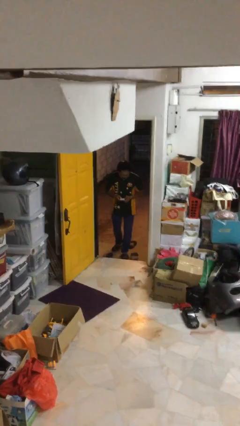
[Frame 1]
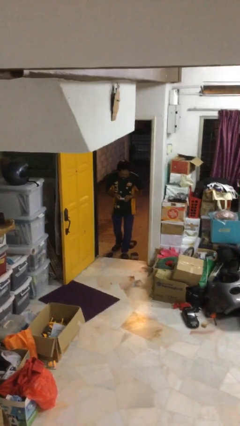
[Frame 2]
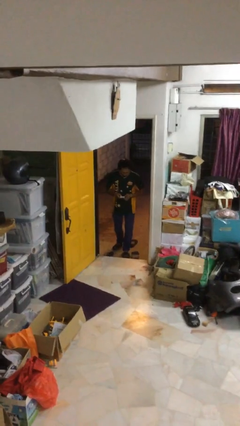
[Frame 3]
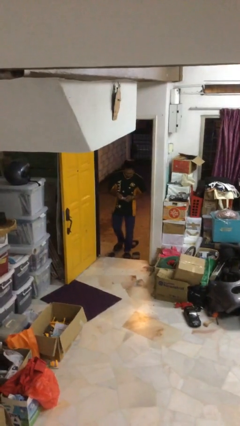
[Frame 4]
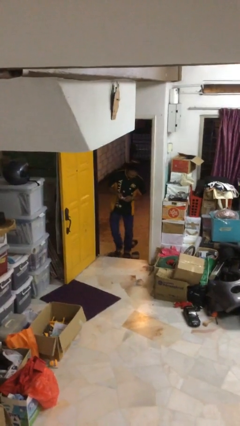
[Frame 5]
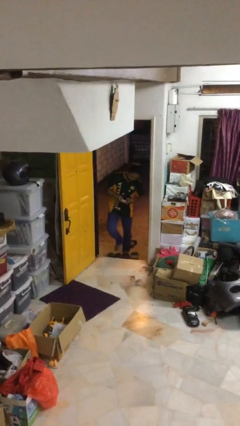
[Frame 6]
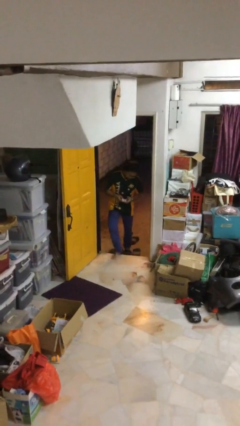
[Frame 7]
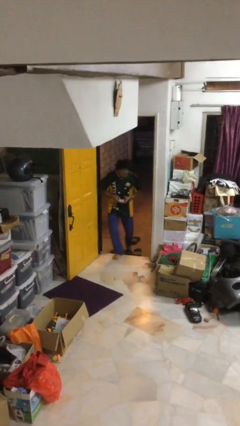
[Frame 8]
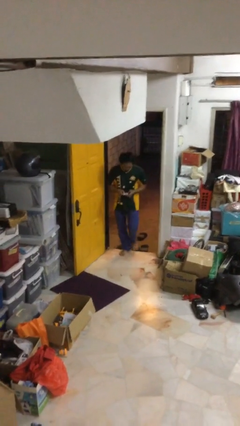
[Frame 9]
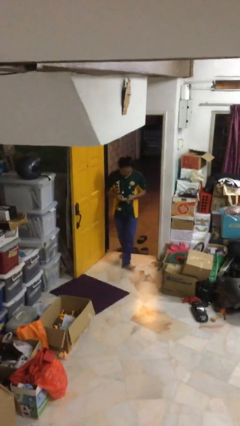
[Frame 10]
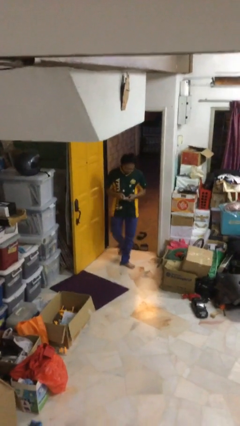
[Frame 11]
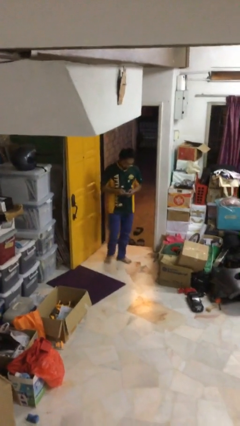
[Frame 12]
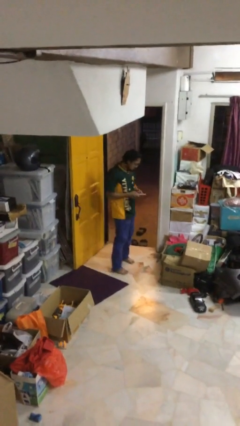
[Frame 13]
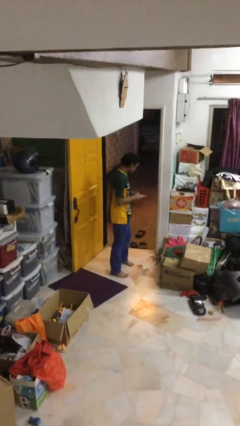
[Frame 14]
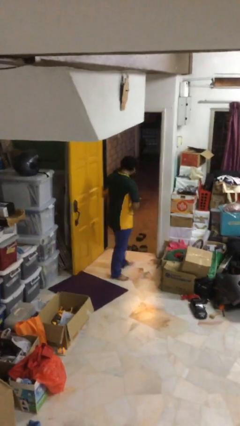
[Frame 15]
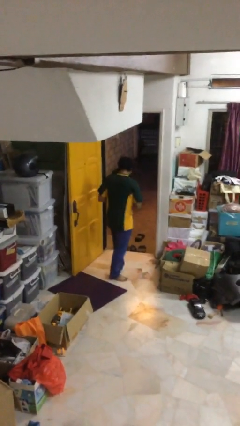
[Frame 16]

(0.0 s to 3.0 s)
person enters scene through structure

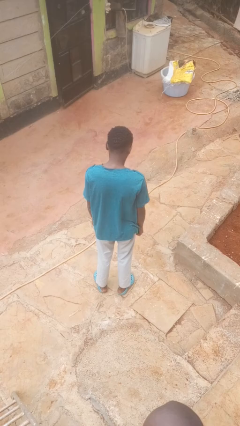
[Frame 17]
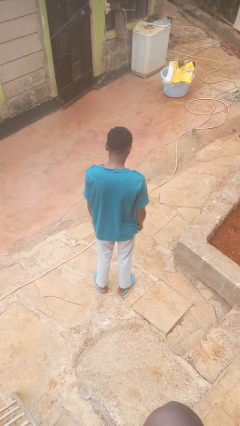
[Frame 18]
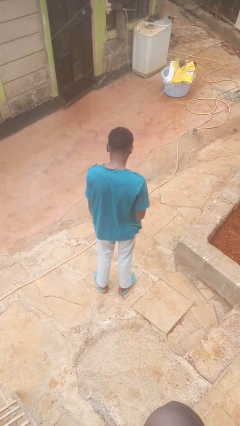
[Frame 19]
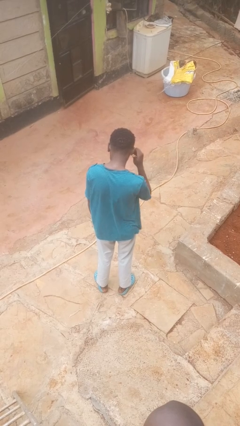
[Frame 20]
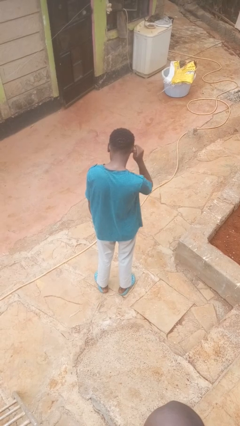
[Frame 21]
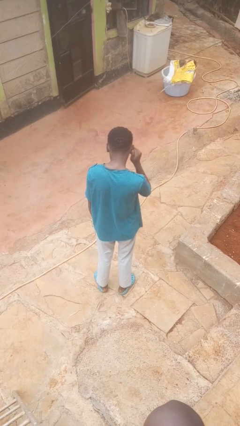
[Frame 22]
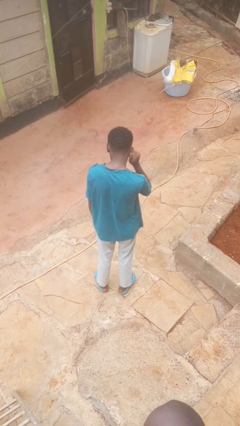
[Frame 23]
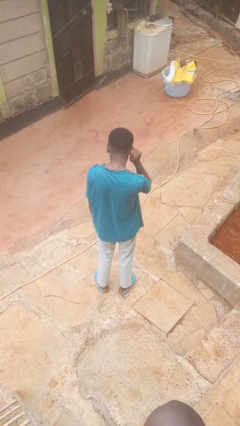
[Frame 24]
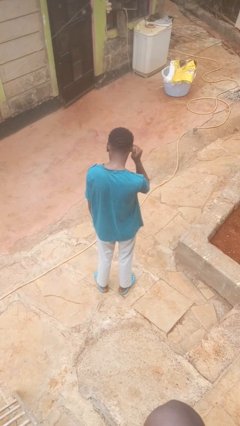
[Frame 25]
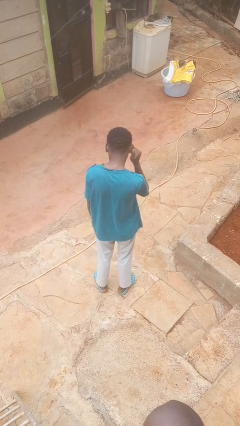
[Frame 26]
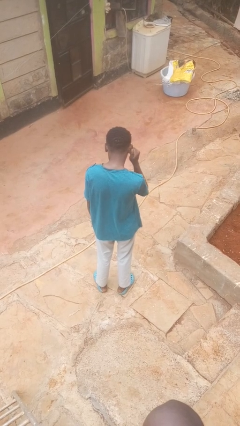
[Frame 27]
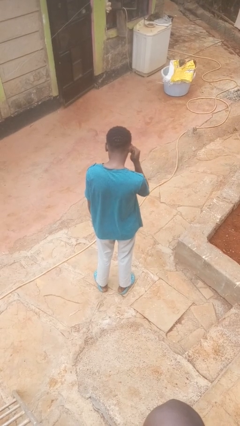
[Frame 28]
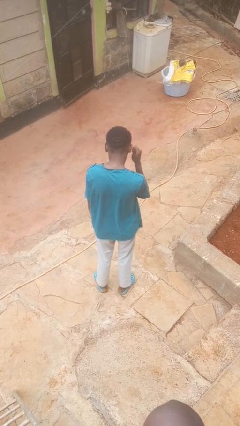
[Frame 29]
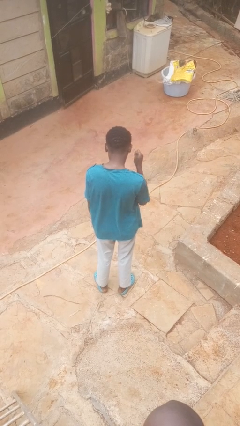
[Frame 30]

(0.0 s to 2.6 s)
person touches earlobe

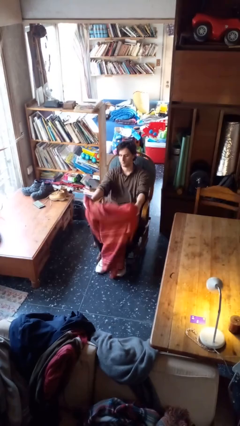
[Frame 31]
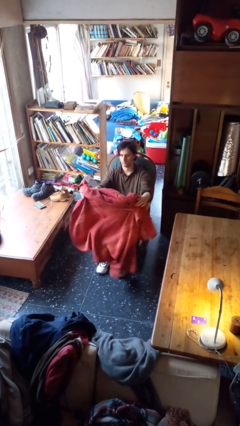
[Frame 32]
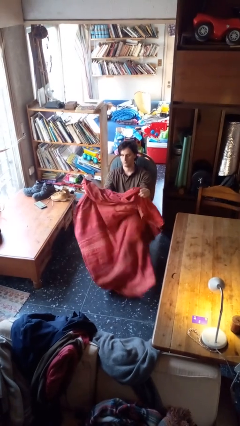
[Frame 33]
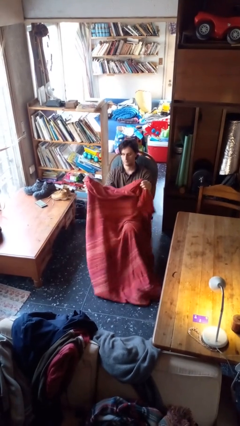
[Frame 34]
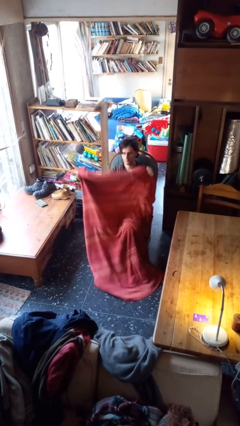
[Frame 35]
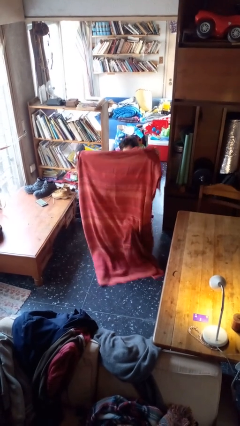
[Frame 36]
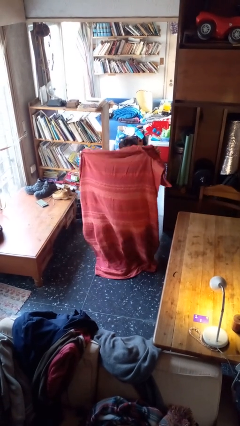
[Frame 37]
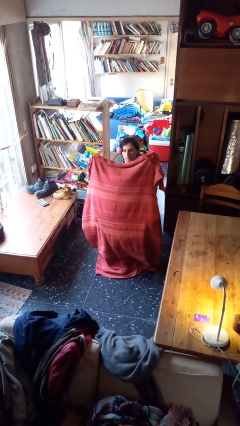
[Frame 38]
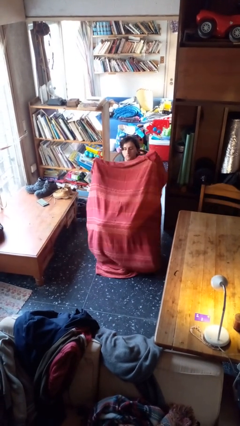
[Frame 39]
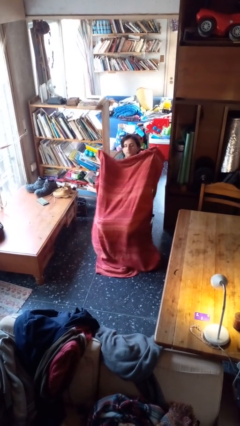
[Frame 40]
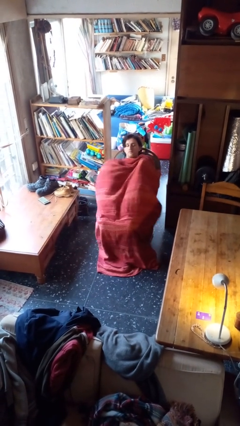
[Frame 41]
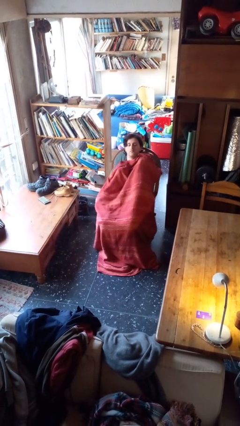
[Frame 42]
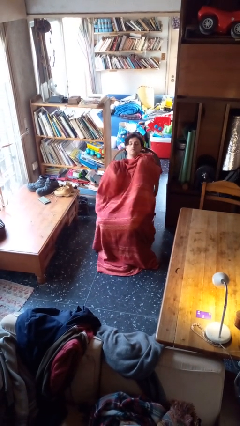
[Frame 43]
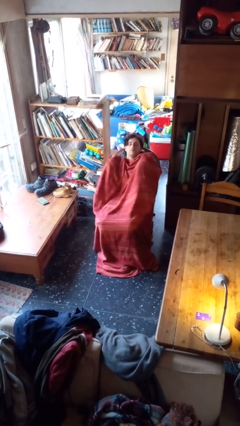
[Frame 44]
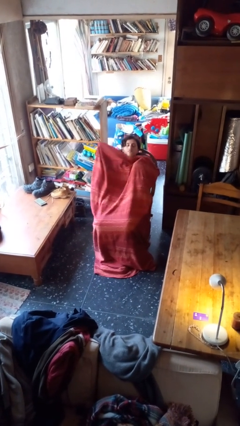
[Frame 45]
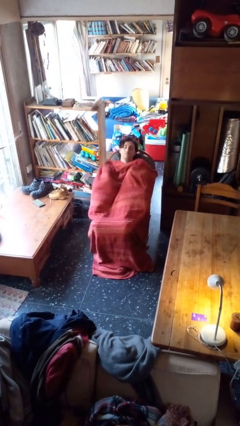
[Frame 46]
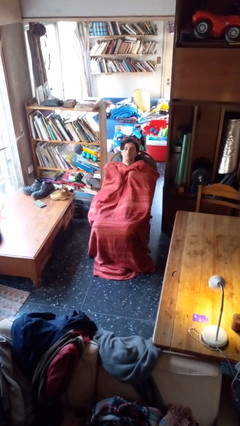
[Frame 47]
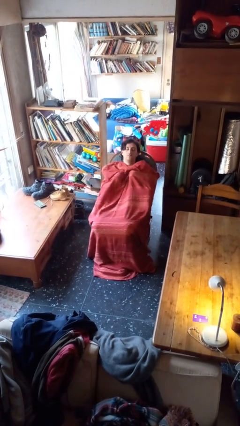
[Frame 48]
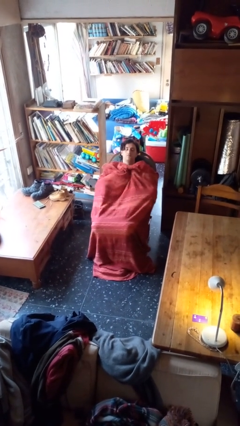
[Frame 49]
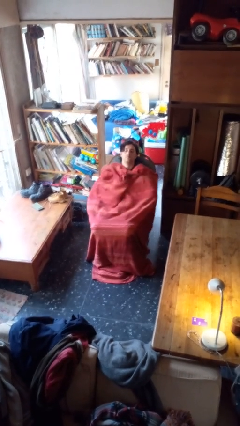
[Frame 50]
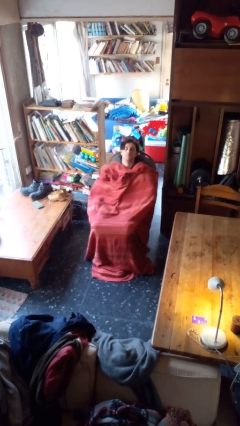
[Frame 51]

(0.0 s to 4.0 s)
person covers with blanket

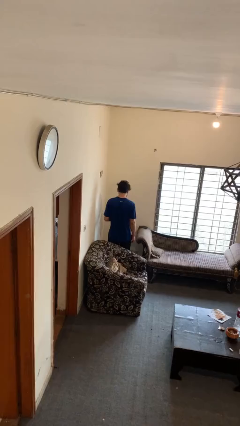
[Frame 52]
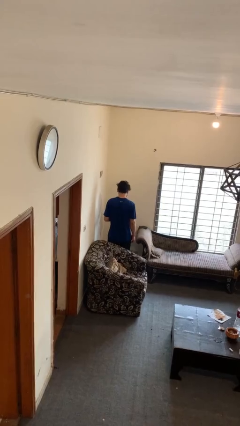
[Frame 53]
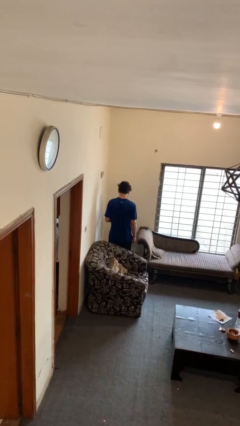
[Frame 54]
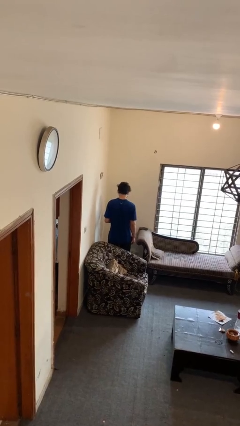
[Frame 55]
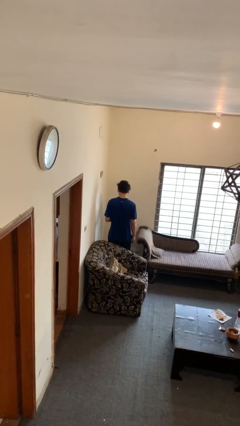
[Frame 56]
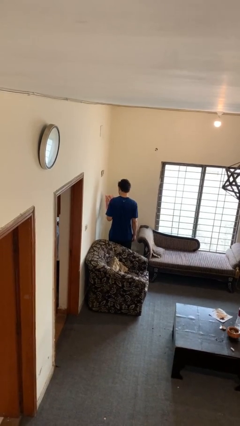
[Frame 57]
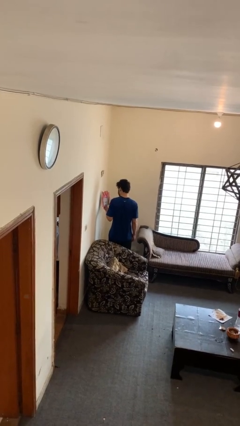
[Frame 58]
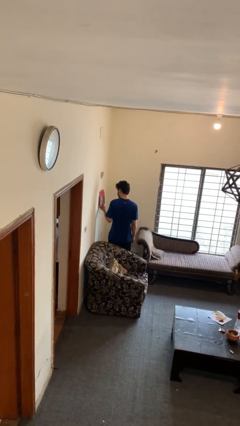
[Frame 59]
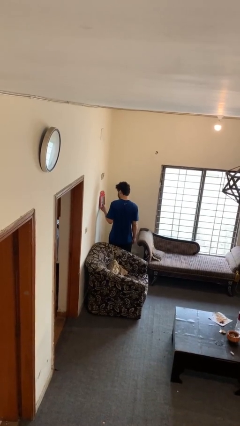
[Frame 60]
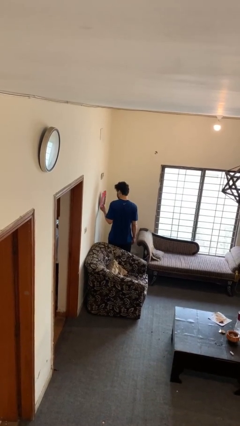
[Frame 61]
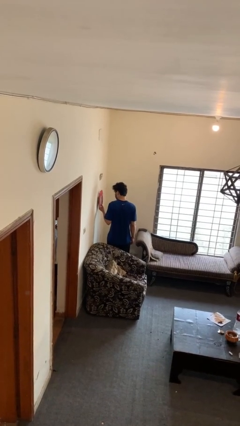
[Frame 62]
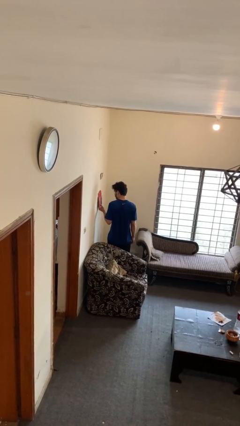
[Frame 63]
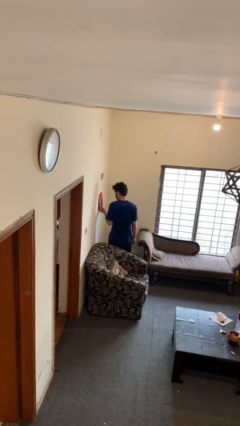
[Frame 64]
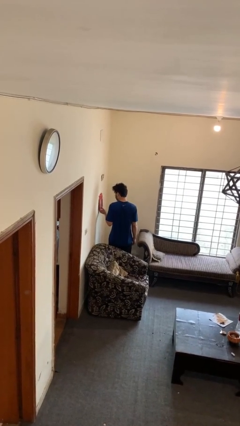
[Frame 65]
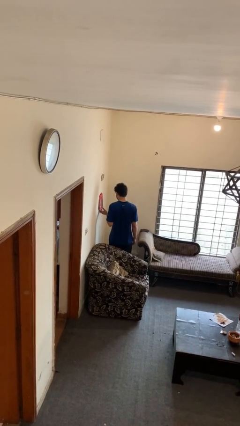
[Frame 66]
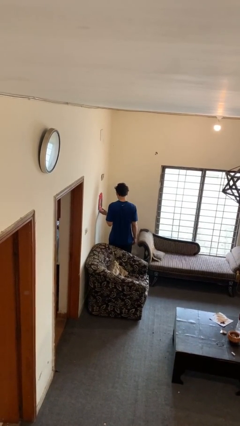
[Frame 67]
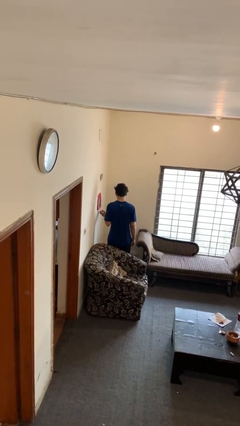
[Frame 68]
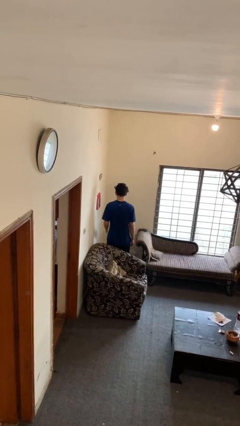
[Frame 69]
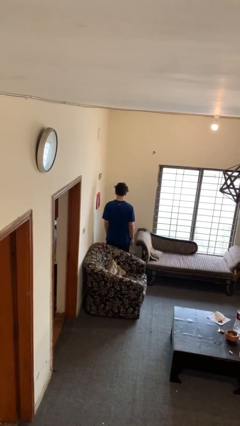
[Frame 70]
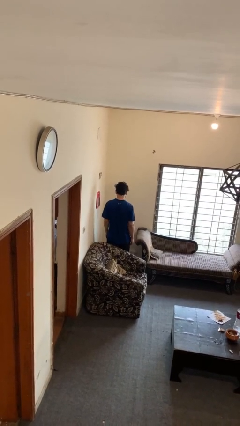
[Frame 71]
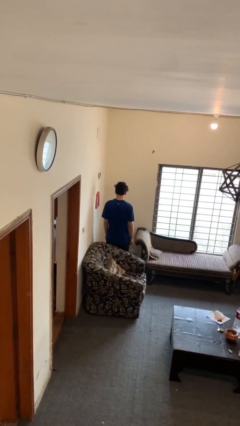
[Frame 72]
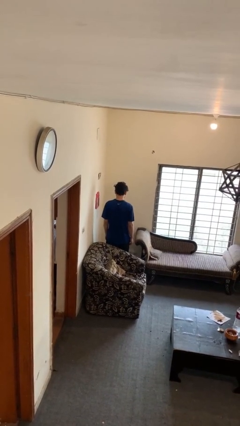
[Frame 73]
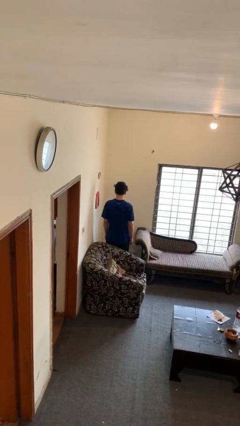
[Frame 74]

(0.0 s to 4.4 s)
person puts up picture frame

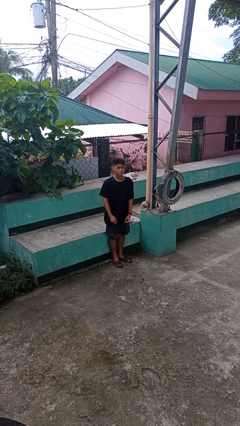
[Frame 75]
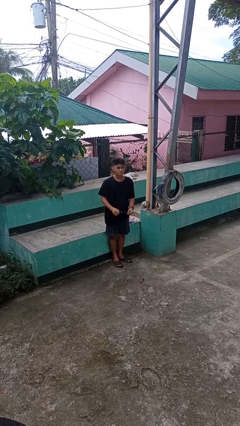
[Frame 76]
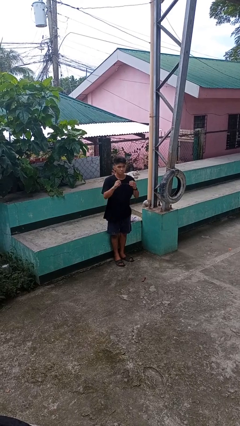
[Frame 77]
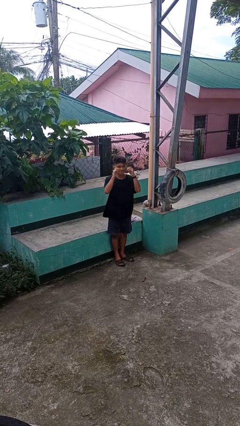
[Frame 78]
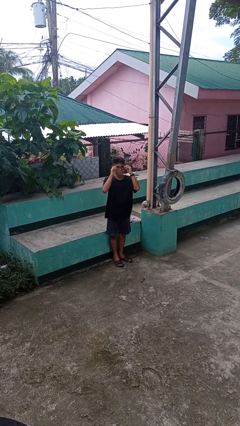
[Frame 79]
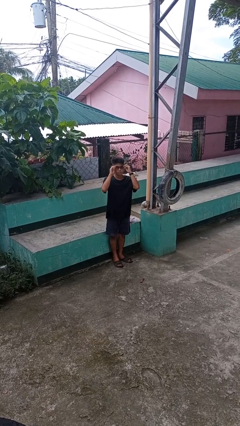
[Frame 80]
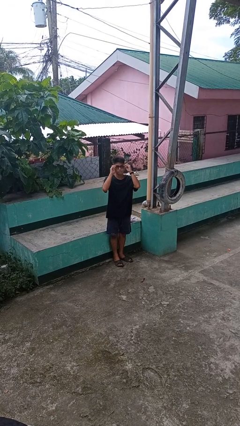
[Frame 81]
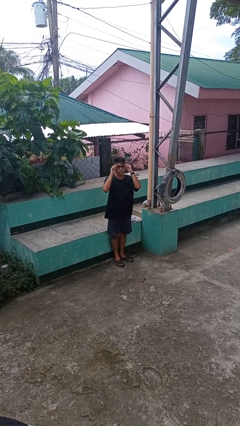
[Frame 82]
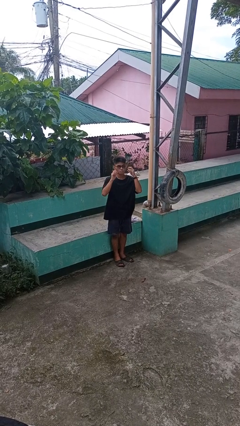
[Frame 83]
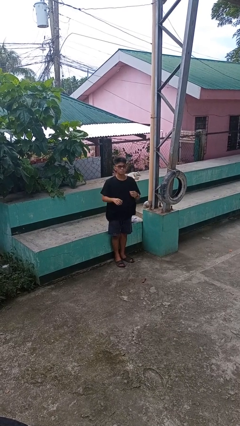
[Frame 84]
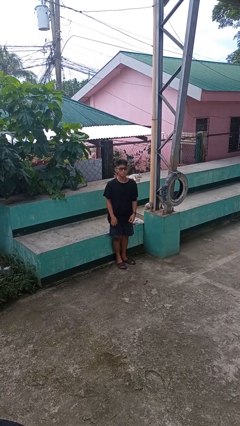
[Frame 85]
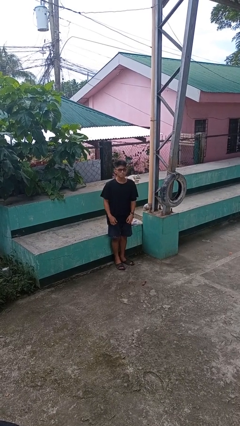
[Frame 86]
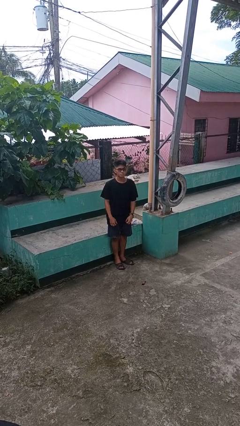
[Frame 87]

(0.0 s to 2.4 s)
person puts on glasses

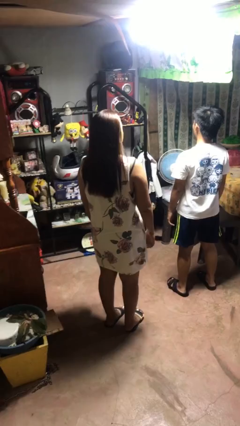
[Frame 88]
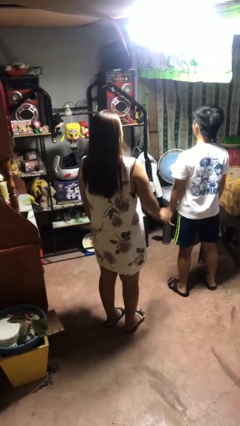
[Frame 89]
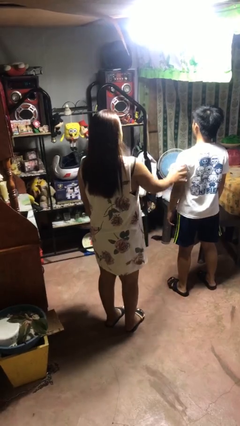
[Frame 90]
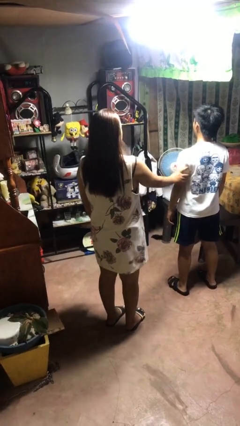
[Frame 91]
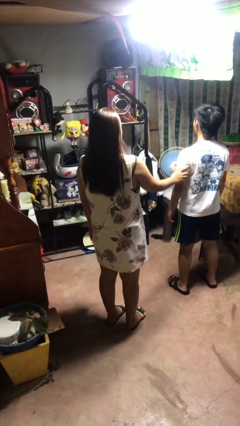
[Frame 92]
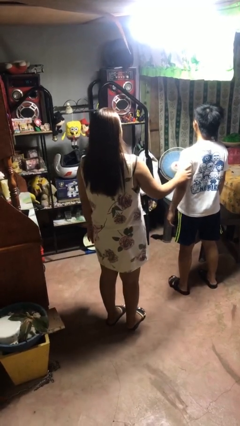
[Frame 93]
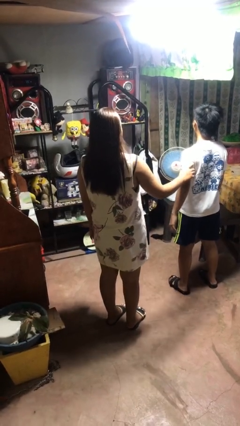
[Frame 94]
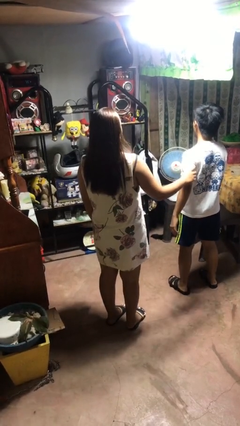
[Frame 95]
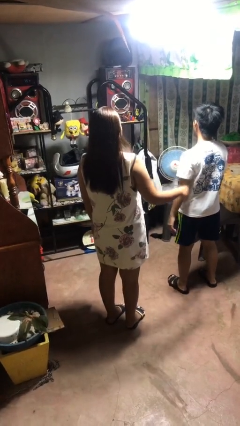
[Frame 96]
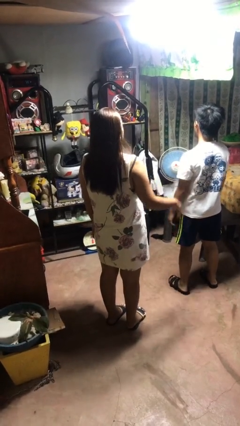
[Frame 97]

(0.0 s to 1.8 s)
person grabs person by bicep
